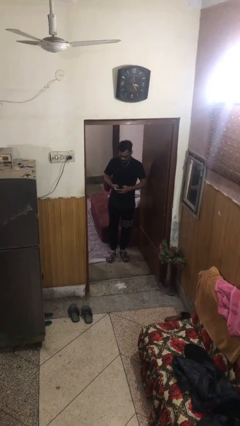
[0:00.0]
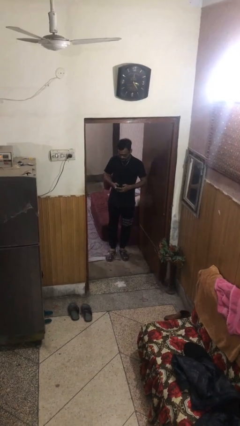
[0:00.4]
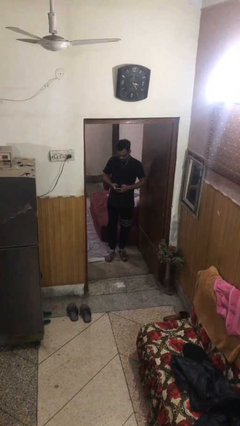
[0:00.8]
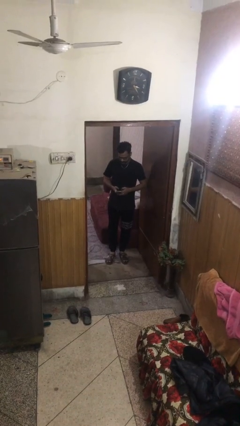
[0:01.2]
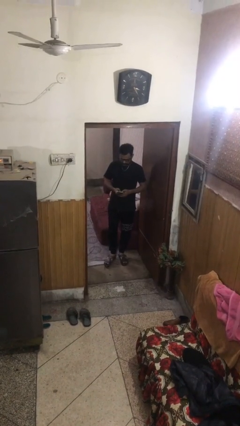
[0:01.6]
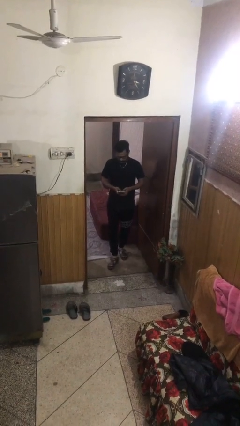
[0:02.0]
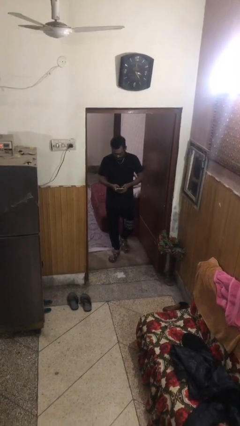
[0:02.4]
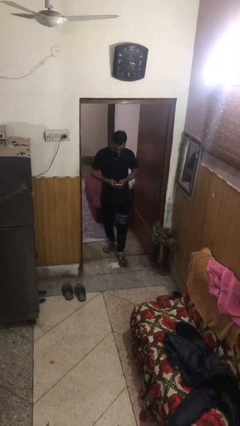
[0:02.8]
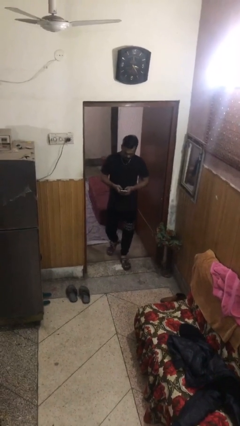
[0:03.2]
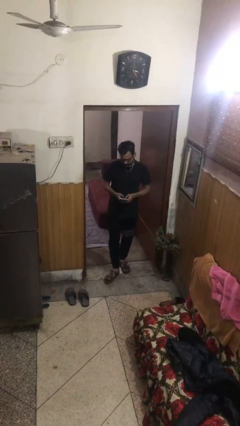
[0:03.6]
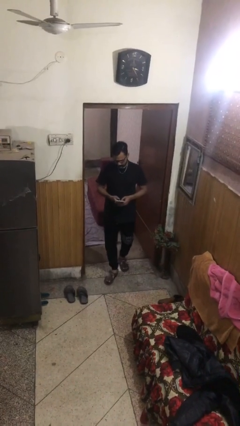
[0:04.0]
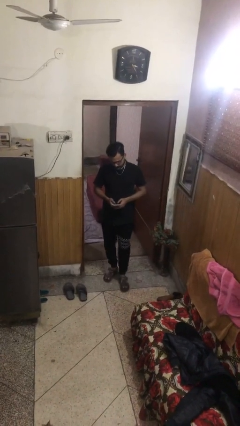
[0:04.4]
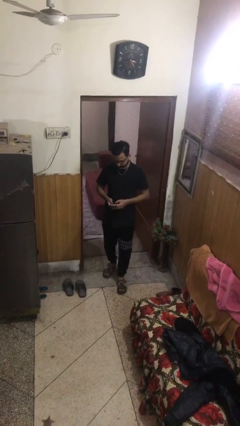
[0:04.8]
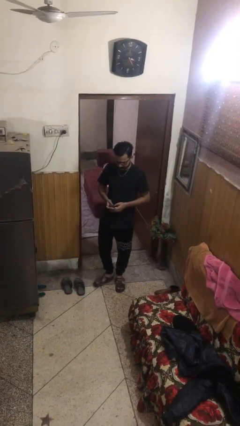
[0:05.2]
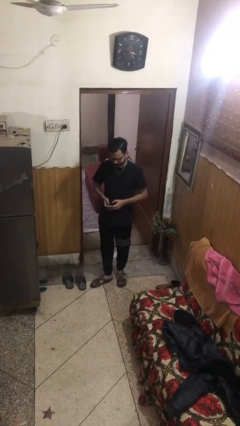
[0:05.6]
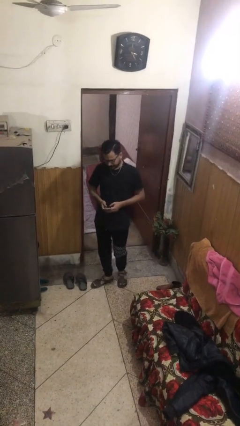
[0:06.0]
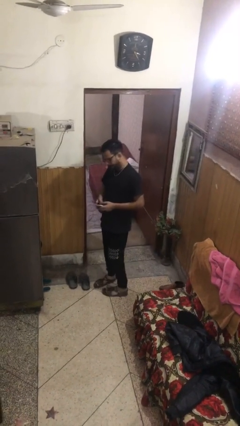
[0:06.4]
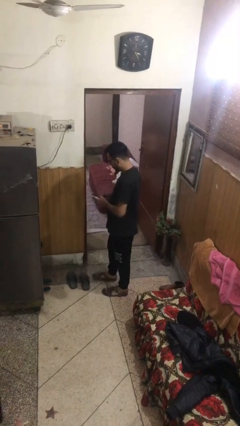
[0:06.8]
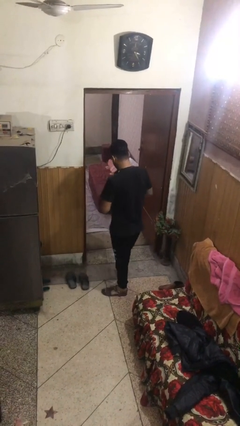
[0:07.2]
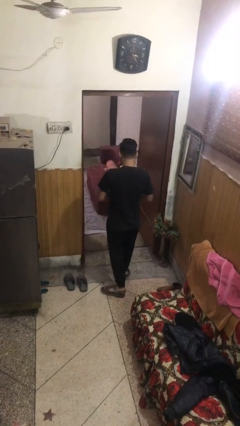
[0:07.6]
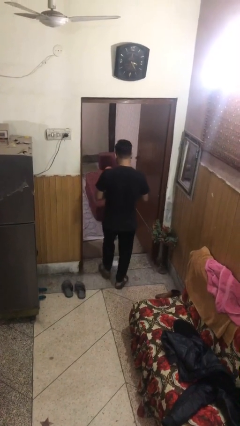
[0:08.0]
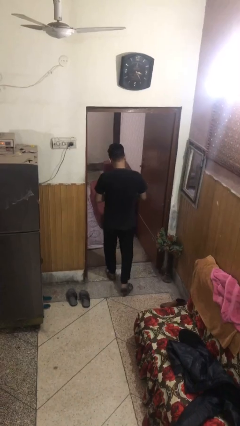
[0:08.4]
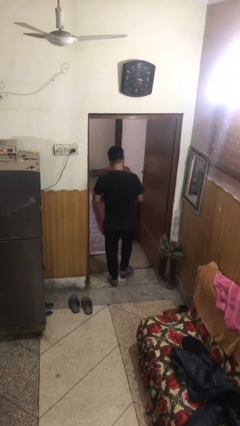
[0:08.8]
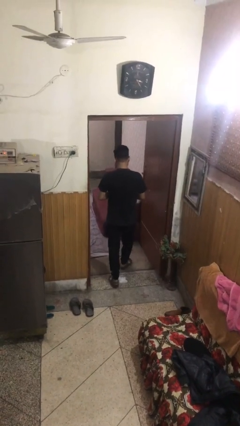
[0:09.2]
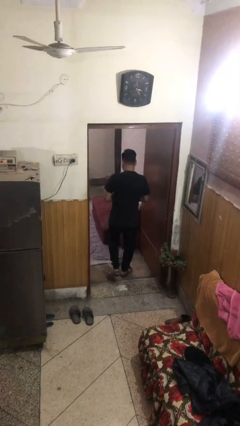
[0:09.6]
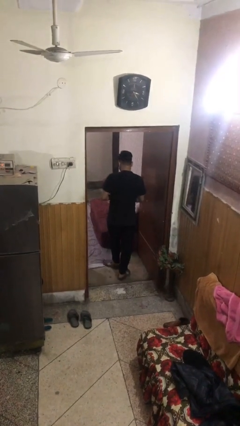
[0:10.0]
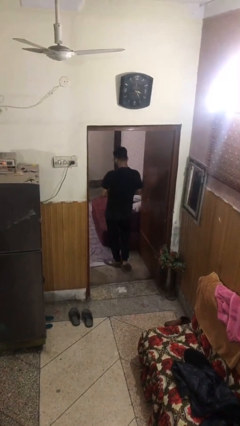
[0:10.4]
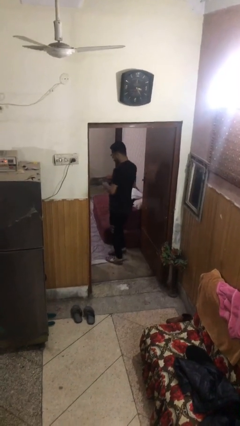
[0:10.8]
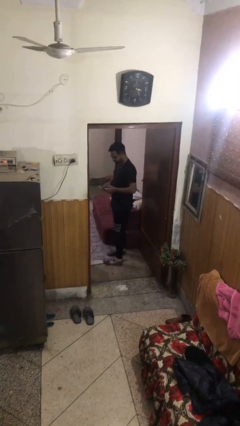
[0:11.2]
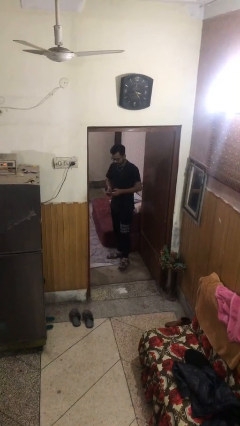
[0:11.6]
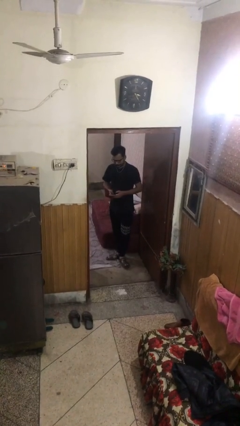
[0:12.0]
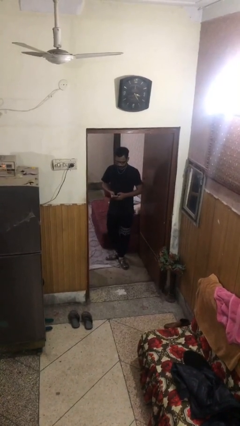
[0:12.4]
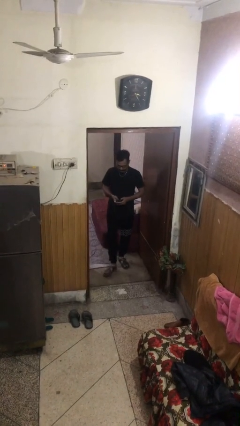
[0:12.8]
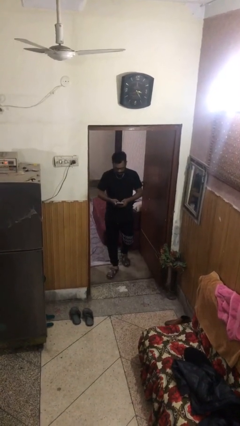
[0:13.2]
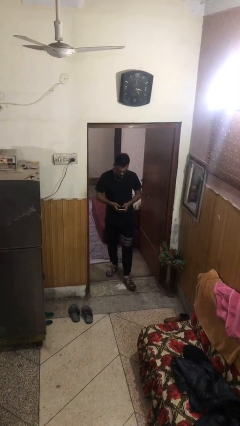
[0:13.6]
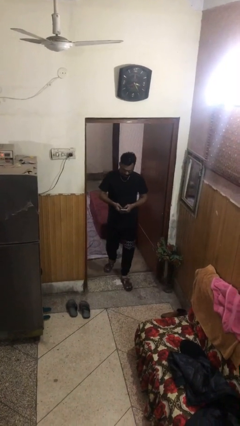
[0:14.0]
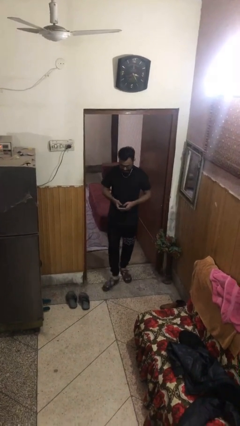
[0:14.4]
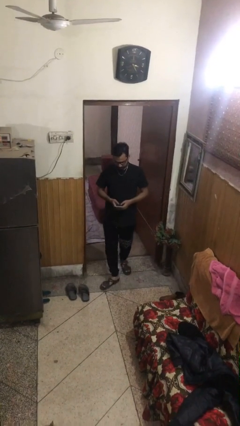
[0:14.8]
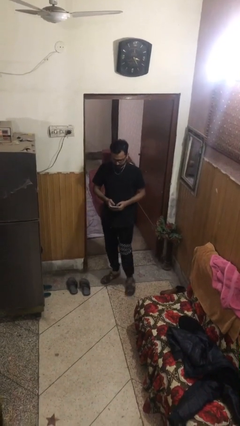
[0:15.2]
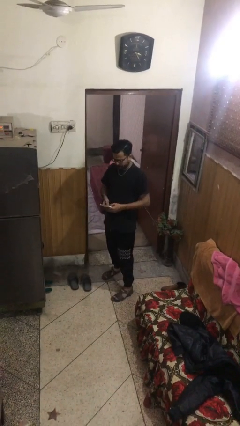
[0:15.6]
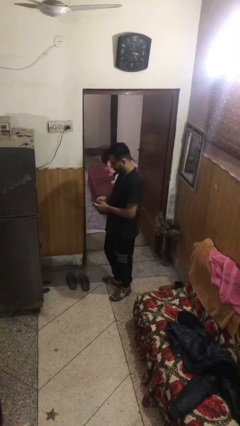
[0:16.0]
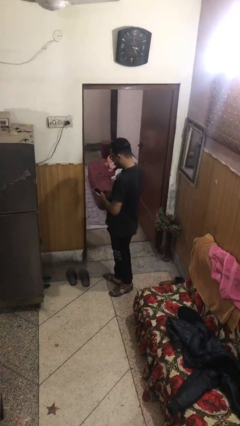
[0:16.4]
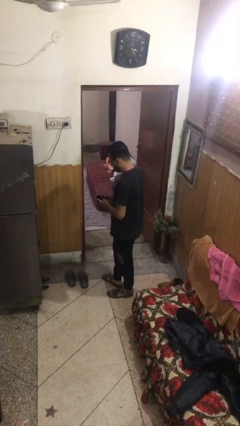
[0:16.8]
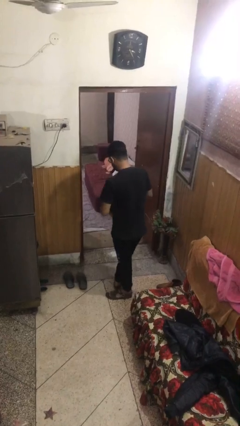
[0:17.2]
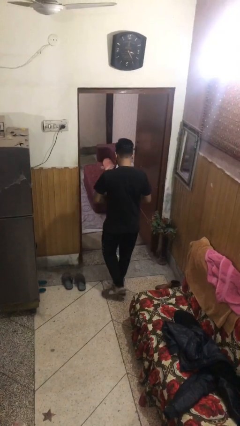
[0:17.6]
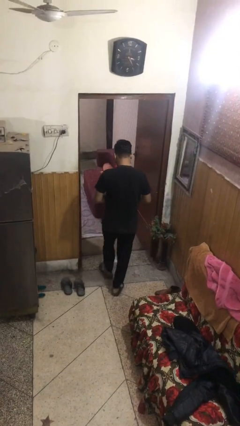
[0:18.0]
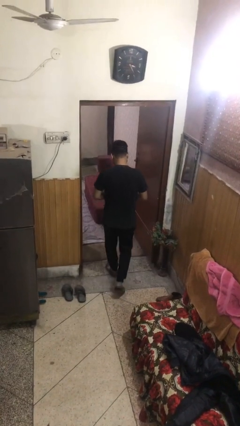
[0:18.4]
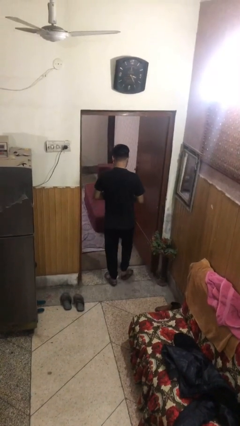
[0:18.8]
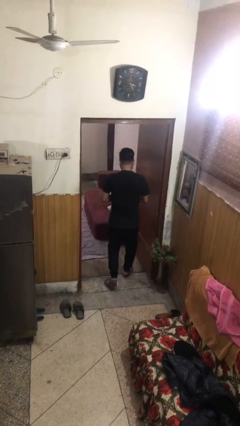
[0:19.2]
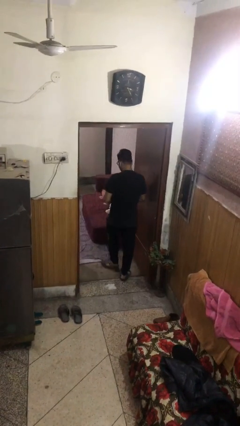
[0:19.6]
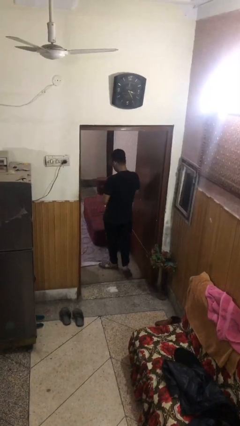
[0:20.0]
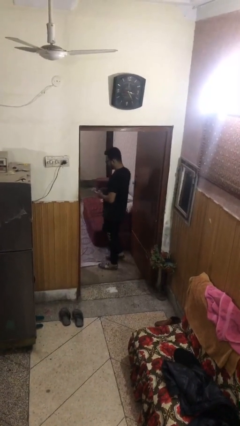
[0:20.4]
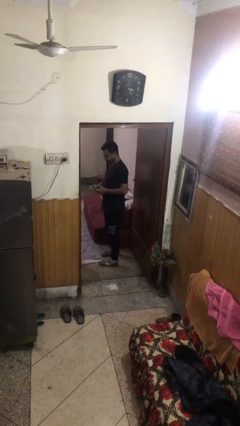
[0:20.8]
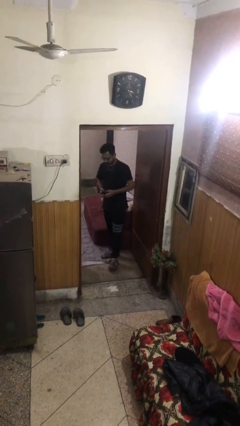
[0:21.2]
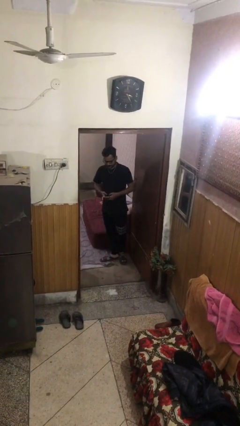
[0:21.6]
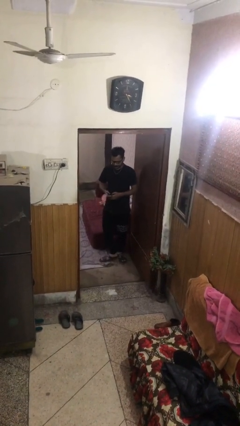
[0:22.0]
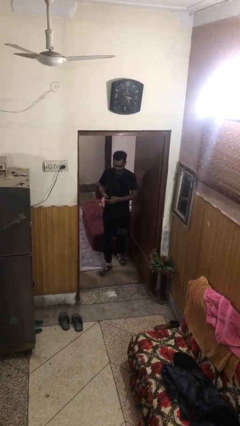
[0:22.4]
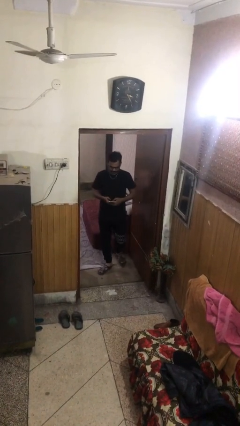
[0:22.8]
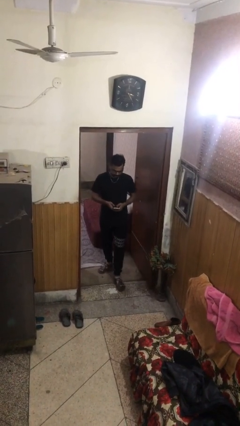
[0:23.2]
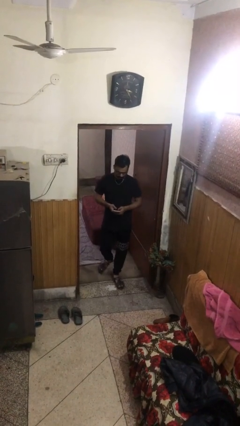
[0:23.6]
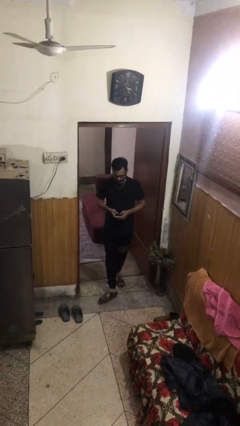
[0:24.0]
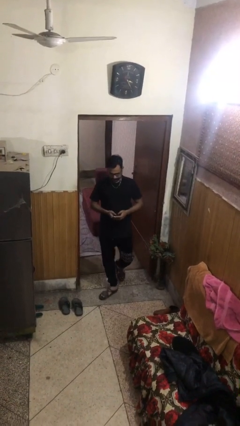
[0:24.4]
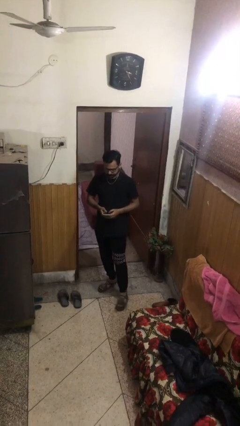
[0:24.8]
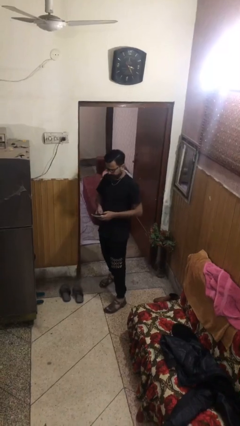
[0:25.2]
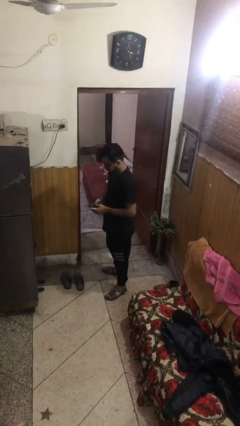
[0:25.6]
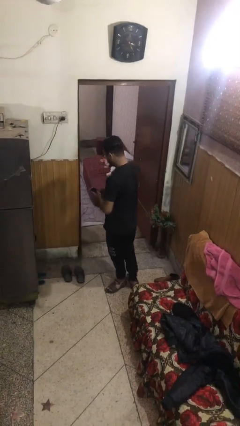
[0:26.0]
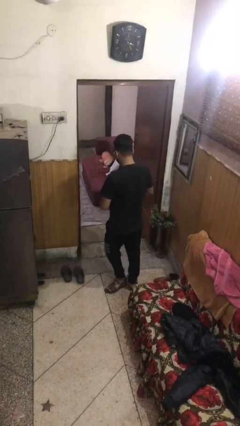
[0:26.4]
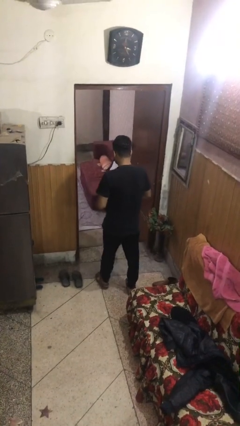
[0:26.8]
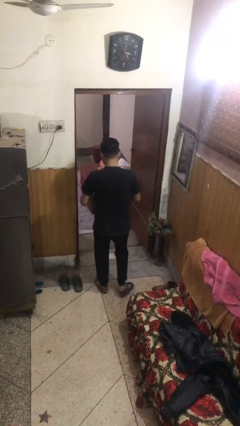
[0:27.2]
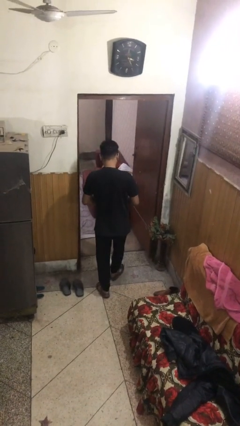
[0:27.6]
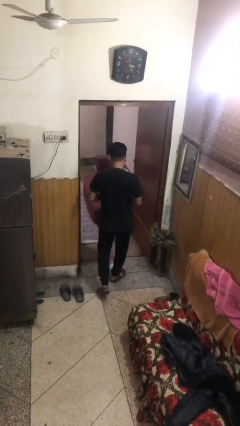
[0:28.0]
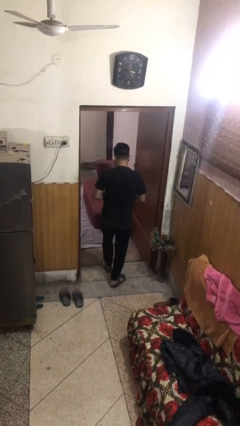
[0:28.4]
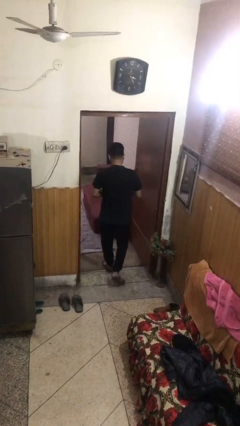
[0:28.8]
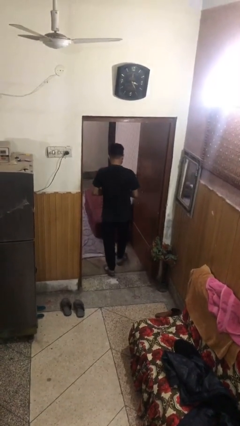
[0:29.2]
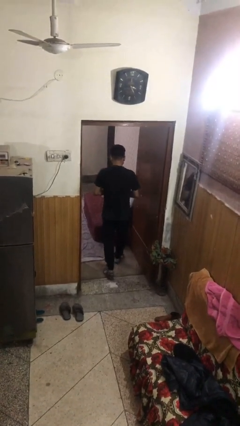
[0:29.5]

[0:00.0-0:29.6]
person texts on phone

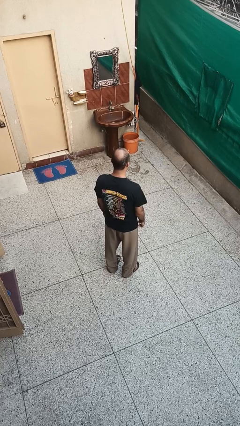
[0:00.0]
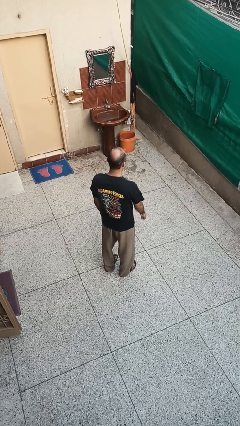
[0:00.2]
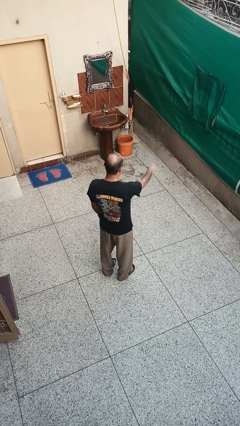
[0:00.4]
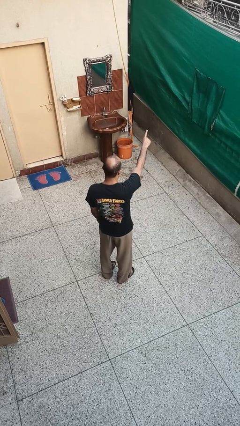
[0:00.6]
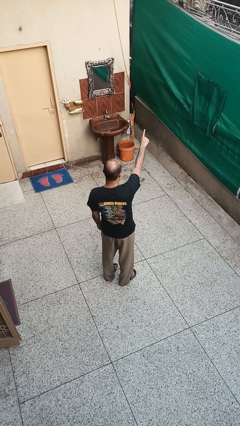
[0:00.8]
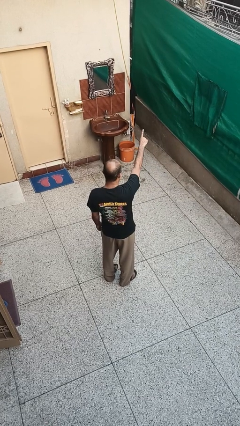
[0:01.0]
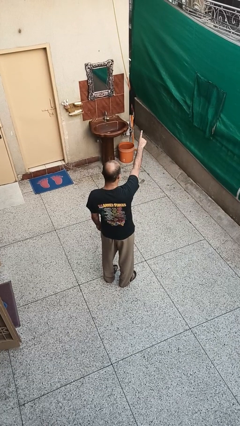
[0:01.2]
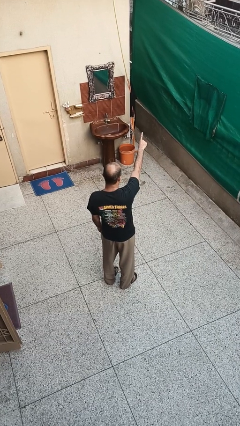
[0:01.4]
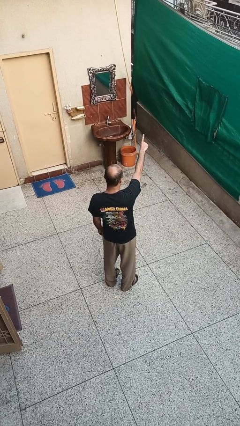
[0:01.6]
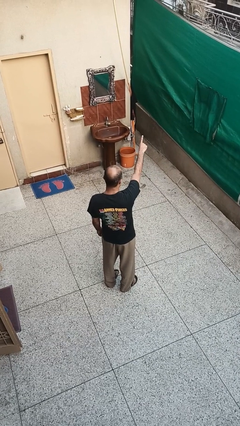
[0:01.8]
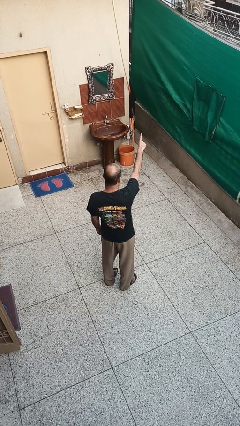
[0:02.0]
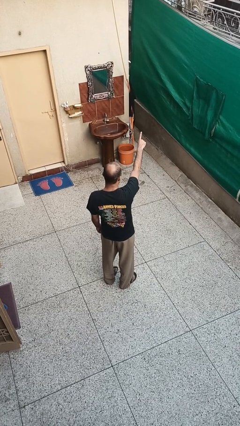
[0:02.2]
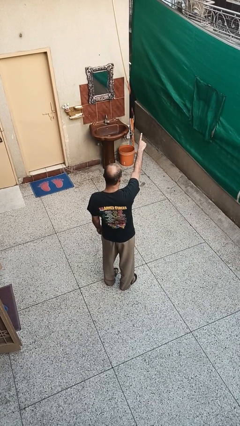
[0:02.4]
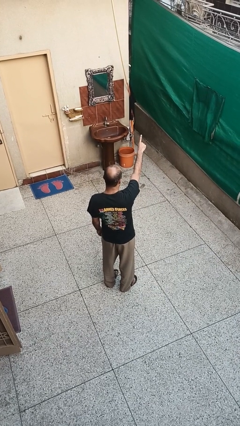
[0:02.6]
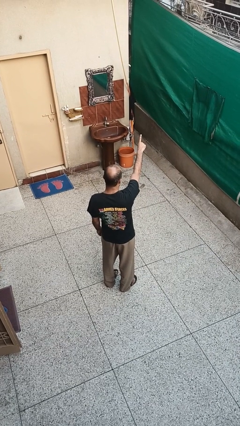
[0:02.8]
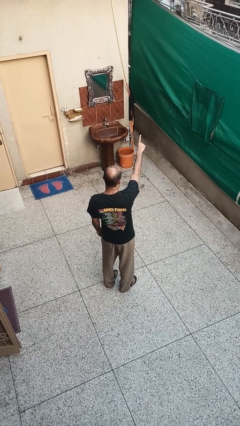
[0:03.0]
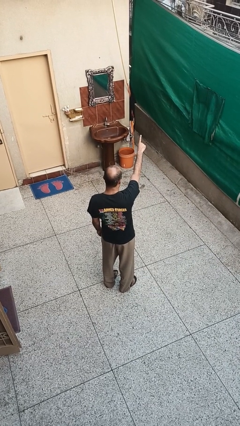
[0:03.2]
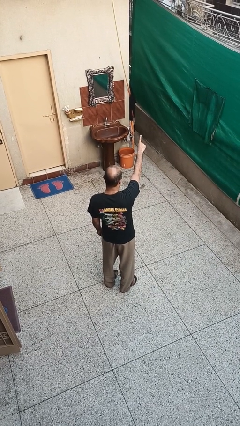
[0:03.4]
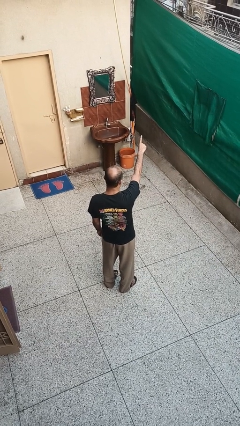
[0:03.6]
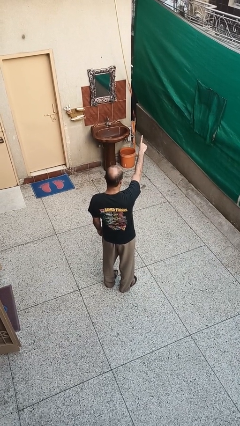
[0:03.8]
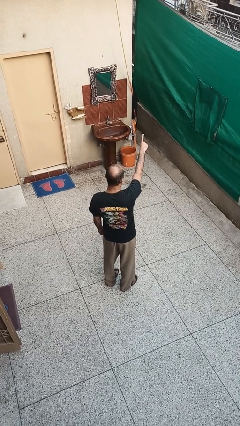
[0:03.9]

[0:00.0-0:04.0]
person points at person
